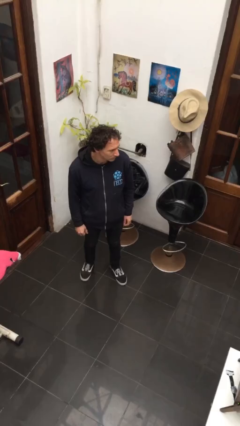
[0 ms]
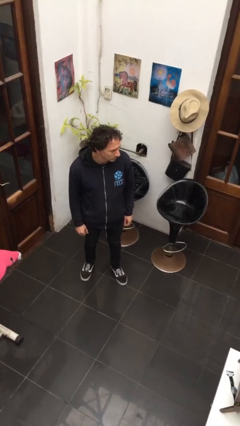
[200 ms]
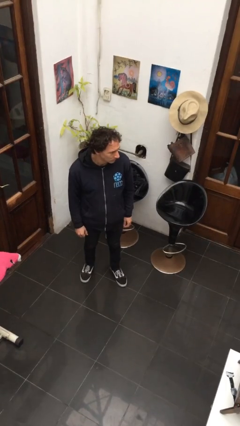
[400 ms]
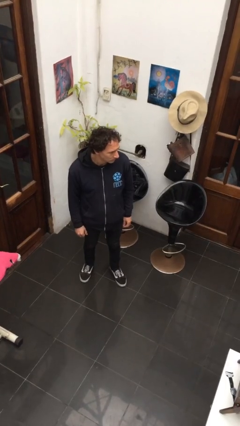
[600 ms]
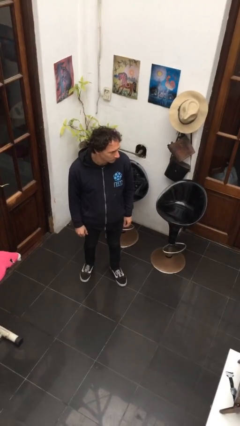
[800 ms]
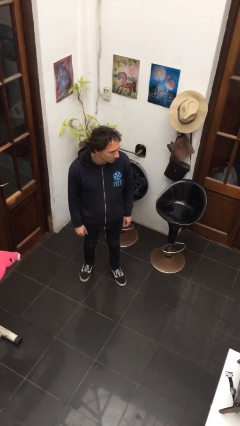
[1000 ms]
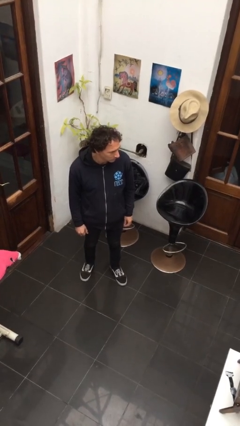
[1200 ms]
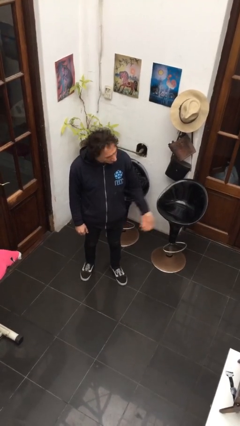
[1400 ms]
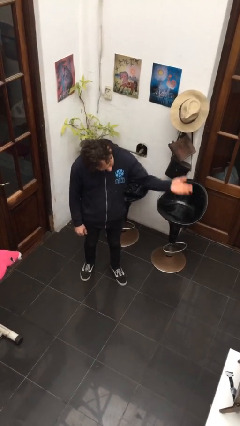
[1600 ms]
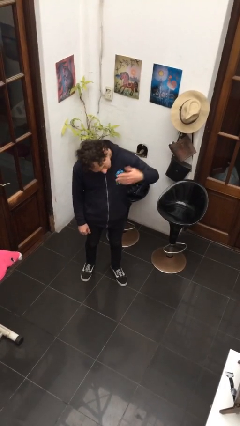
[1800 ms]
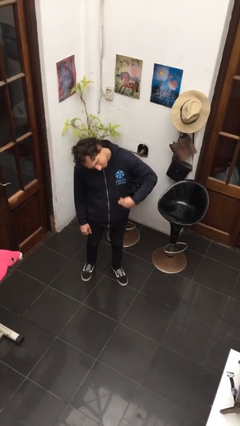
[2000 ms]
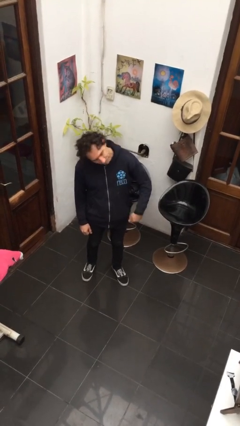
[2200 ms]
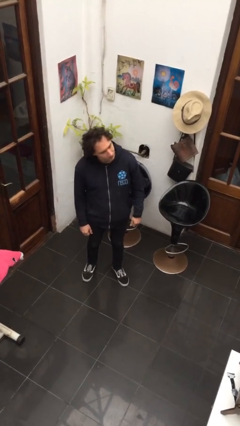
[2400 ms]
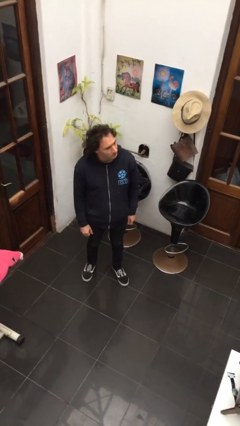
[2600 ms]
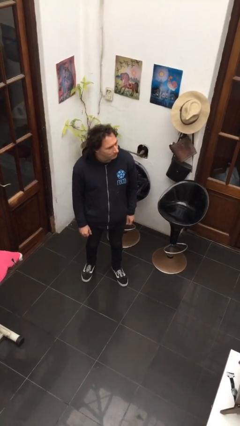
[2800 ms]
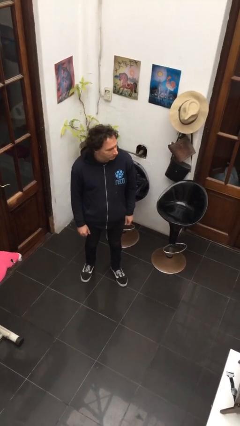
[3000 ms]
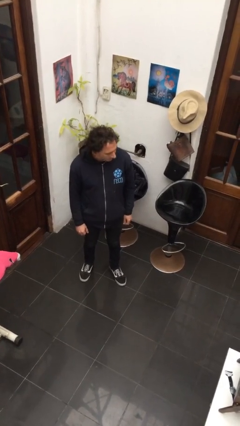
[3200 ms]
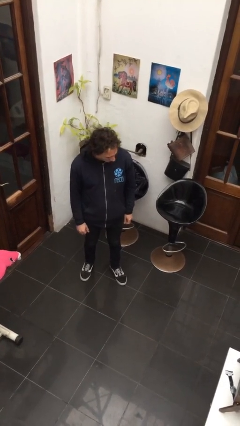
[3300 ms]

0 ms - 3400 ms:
person gestures come here

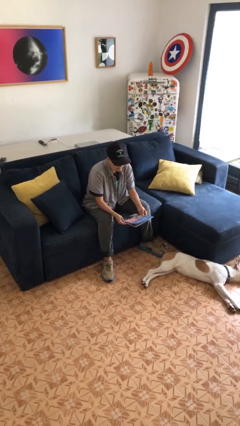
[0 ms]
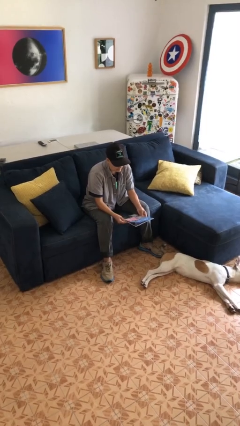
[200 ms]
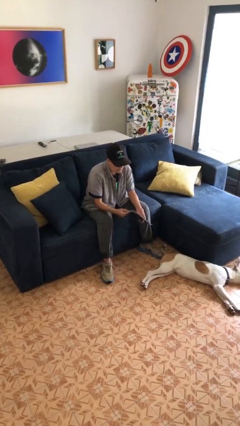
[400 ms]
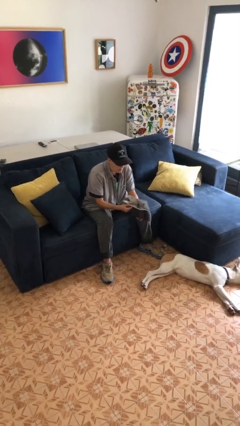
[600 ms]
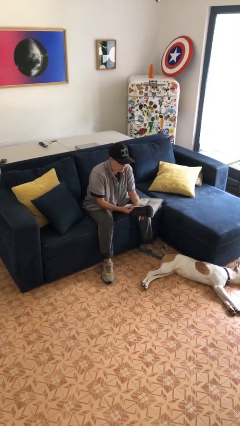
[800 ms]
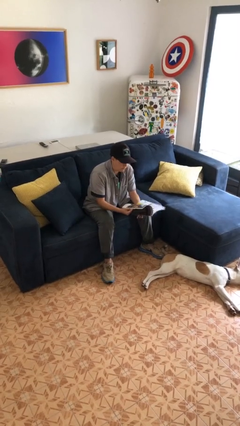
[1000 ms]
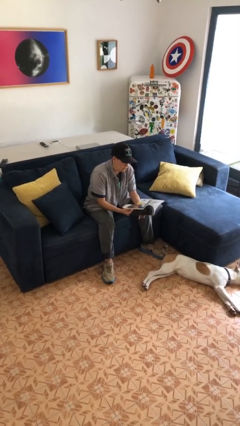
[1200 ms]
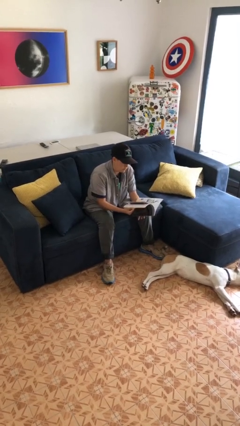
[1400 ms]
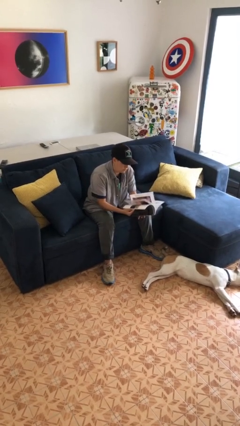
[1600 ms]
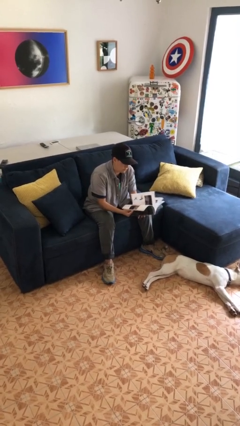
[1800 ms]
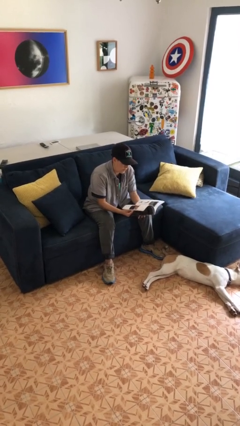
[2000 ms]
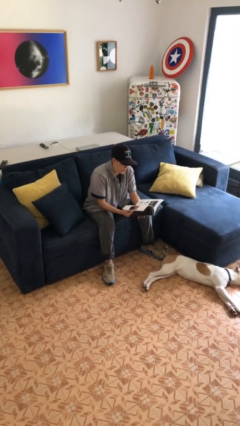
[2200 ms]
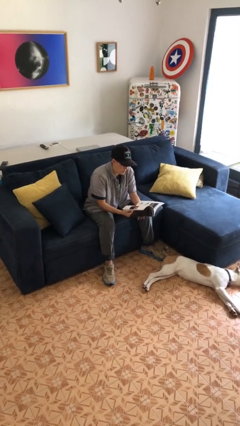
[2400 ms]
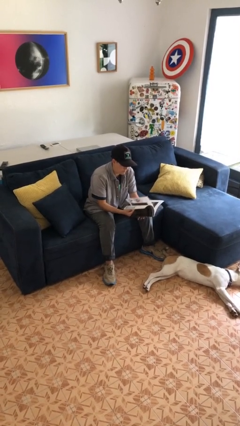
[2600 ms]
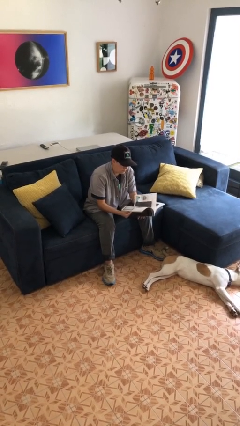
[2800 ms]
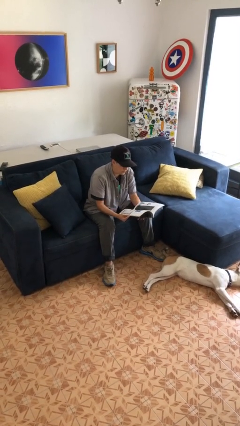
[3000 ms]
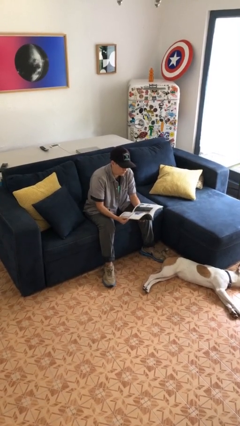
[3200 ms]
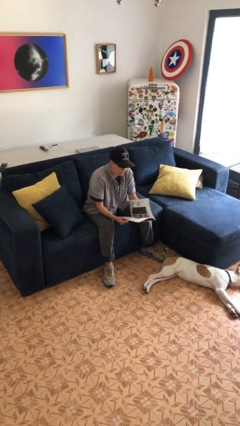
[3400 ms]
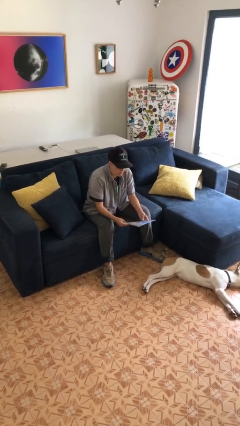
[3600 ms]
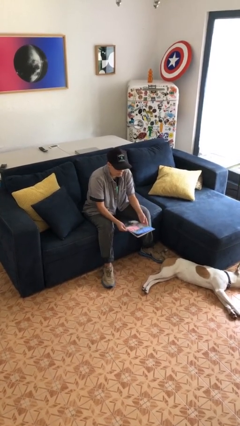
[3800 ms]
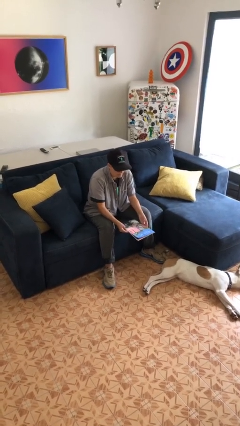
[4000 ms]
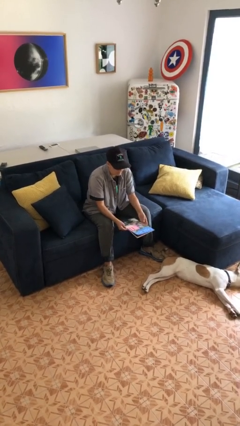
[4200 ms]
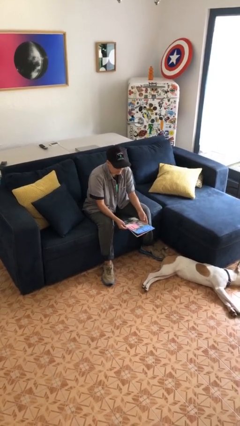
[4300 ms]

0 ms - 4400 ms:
person reads magazine

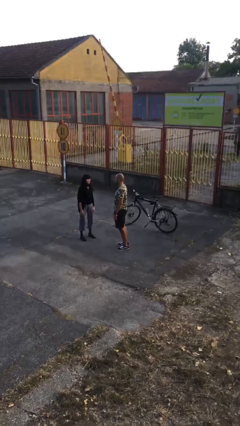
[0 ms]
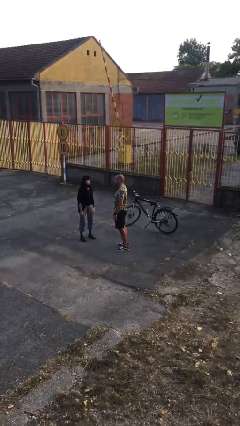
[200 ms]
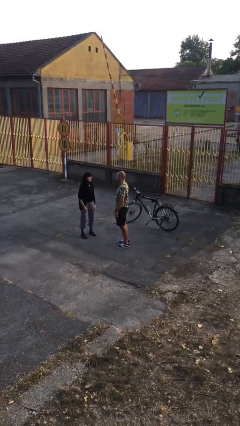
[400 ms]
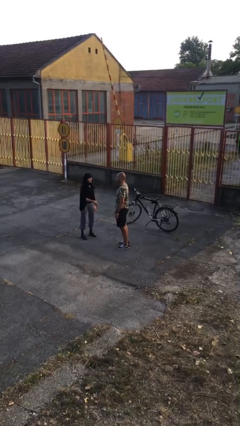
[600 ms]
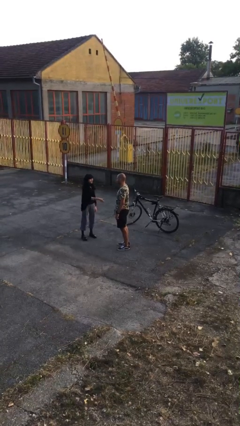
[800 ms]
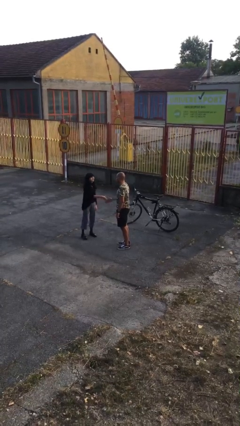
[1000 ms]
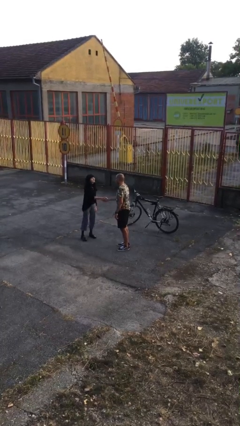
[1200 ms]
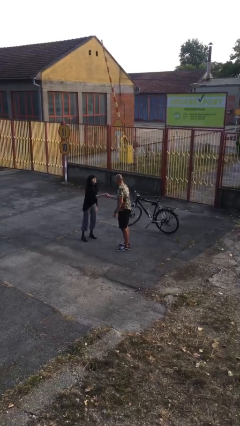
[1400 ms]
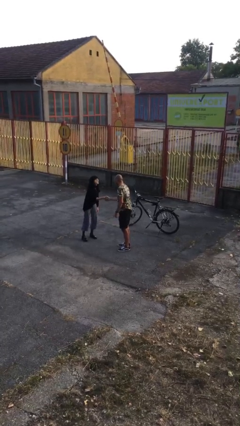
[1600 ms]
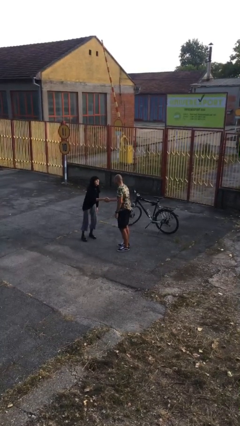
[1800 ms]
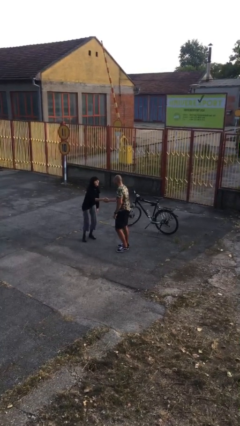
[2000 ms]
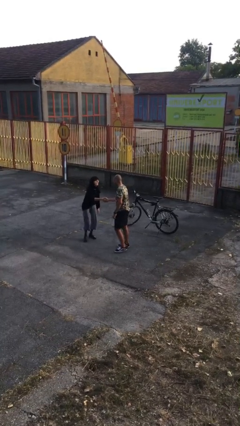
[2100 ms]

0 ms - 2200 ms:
person shakes hand

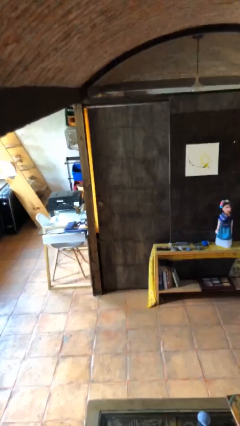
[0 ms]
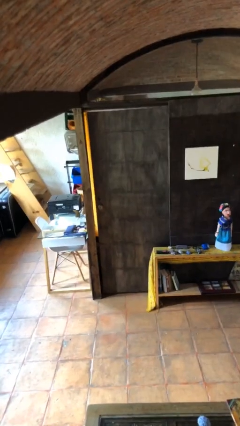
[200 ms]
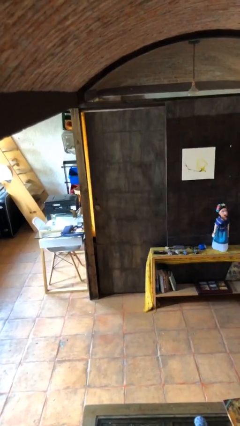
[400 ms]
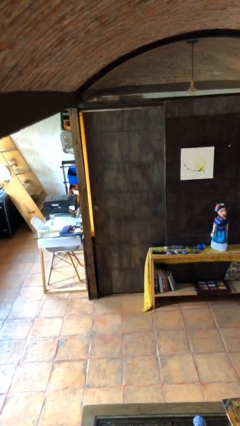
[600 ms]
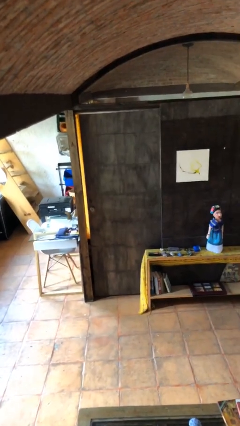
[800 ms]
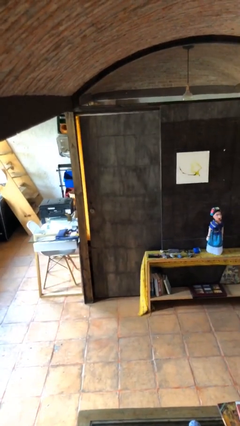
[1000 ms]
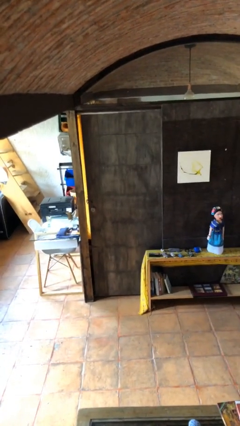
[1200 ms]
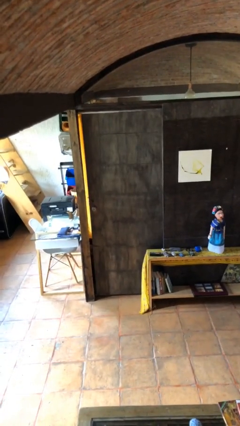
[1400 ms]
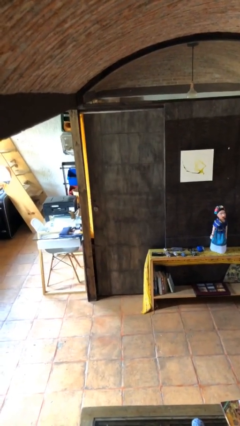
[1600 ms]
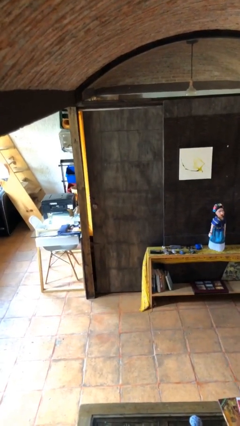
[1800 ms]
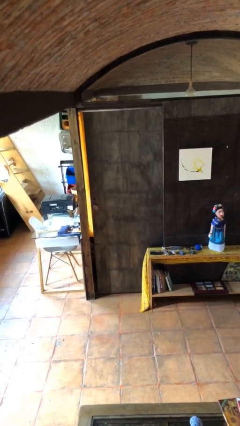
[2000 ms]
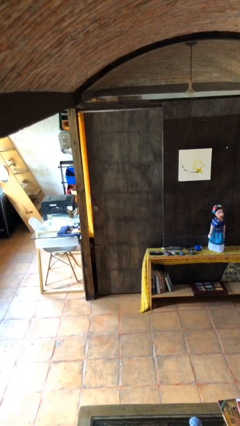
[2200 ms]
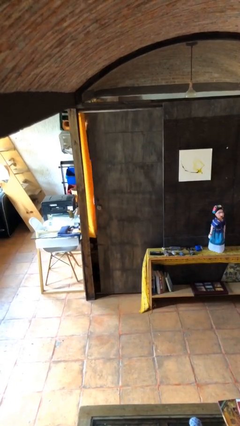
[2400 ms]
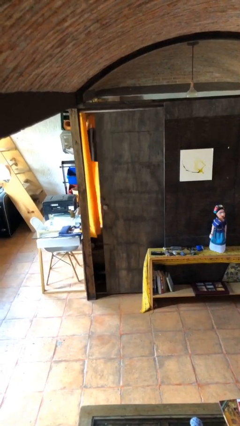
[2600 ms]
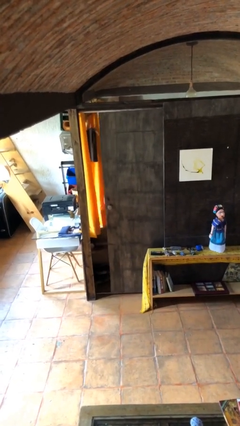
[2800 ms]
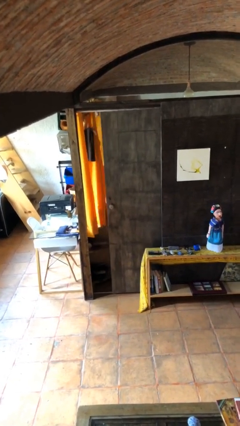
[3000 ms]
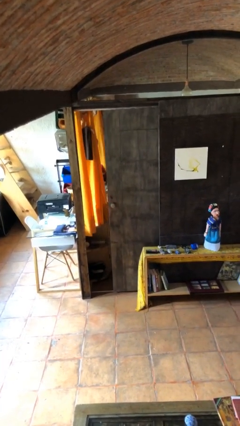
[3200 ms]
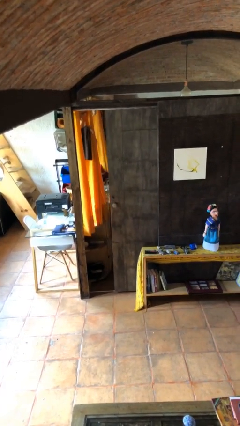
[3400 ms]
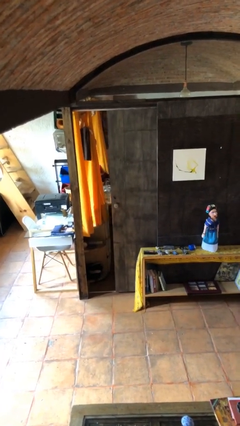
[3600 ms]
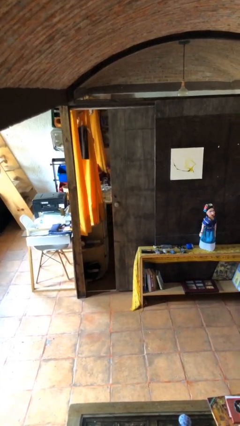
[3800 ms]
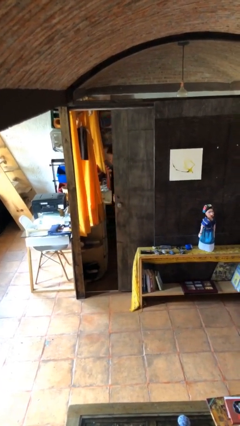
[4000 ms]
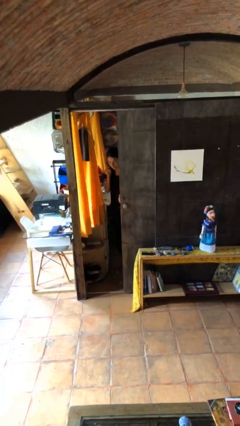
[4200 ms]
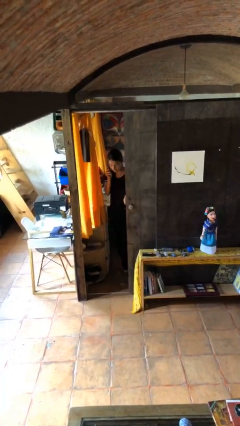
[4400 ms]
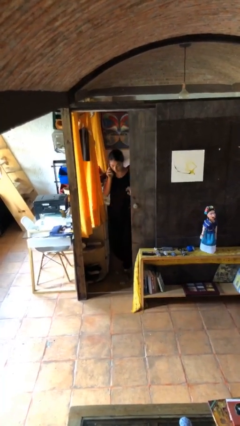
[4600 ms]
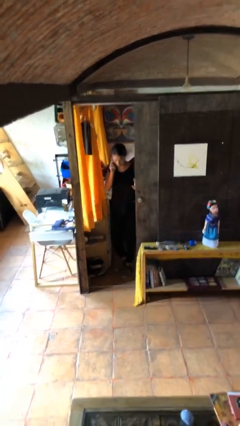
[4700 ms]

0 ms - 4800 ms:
person opens facility door

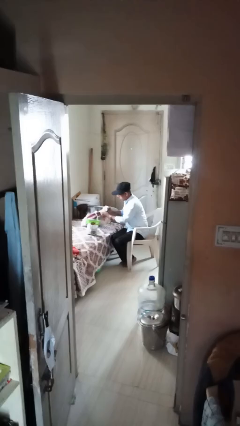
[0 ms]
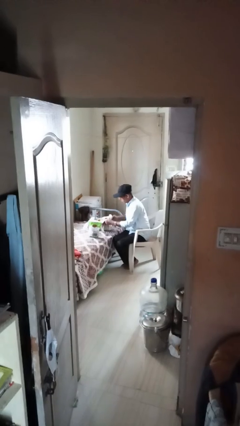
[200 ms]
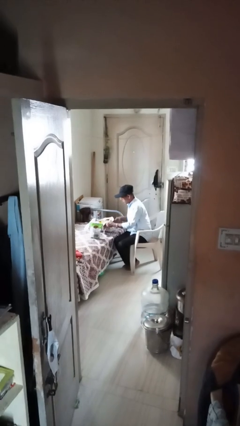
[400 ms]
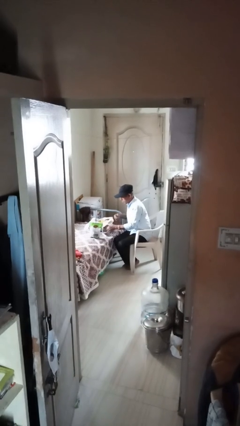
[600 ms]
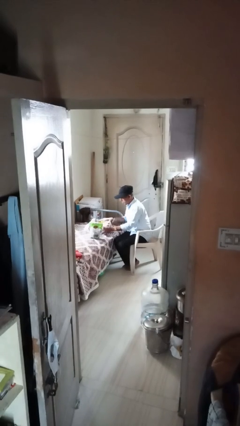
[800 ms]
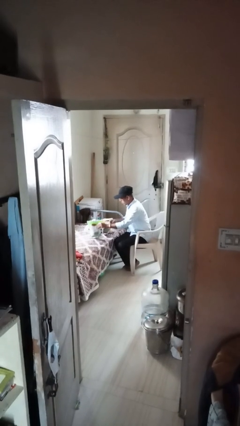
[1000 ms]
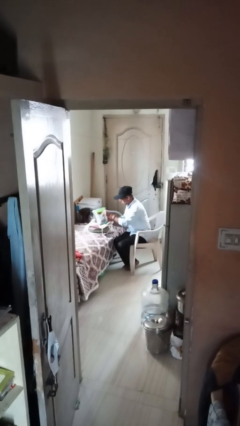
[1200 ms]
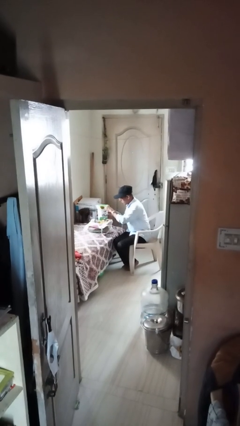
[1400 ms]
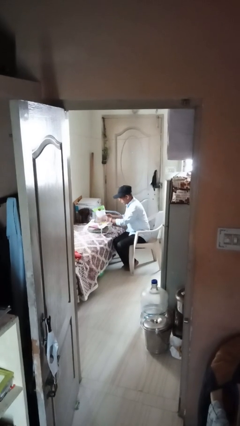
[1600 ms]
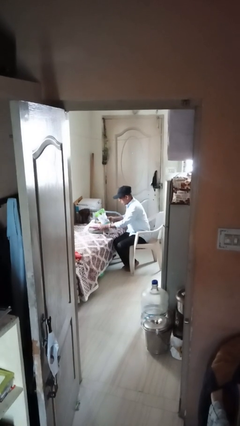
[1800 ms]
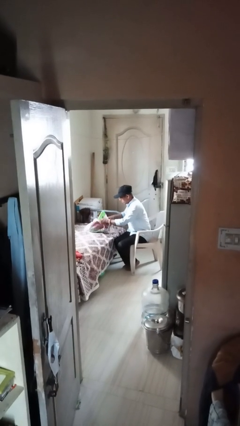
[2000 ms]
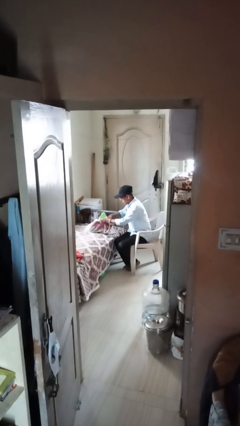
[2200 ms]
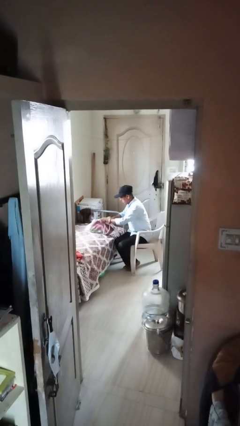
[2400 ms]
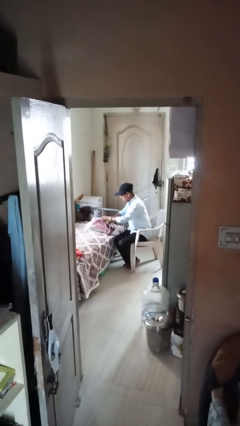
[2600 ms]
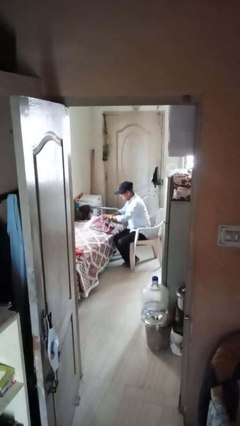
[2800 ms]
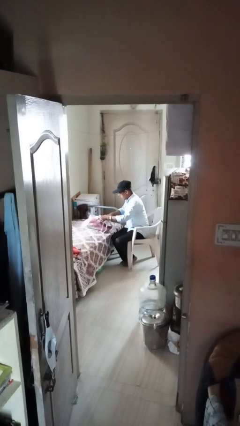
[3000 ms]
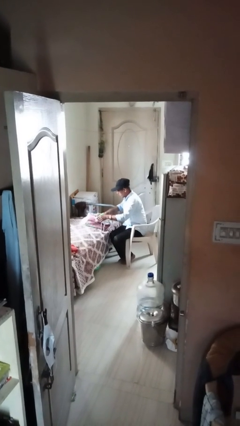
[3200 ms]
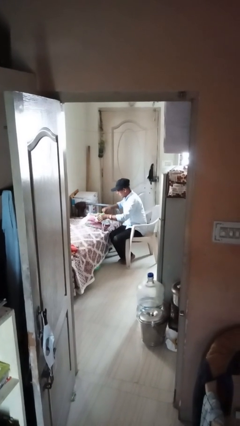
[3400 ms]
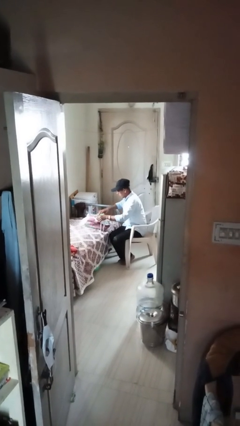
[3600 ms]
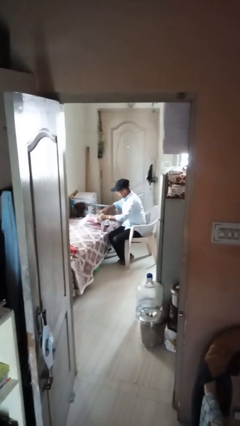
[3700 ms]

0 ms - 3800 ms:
person puts object into bag
